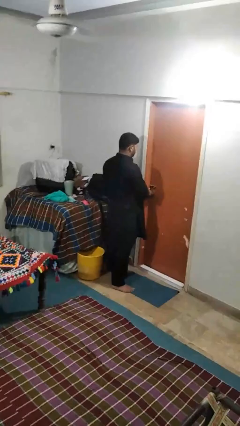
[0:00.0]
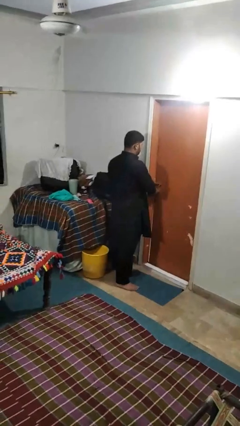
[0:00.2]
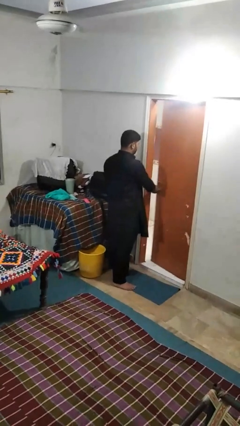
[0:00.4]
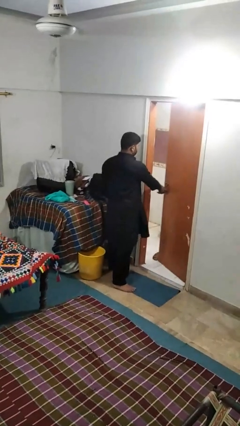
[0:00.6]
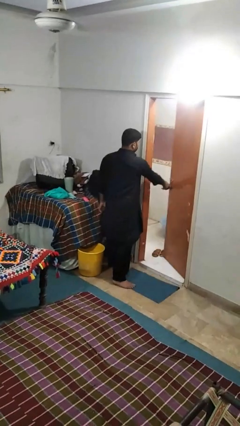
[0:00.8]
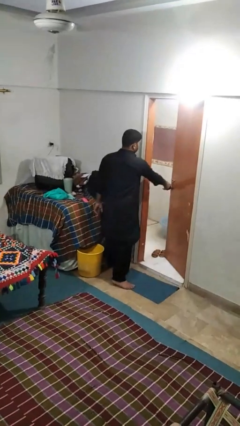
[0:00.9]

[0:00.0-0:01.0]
person opens facility door

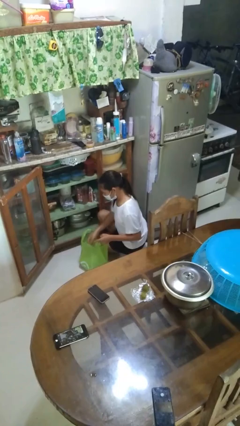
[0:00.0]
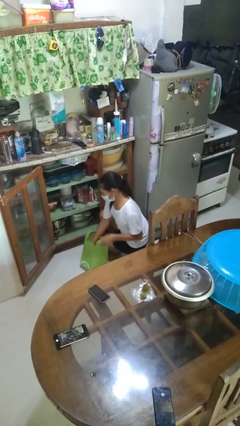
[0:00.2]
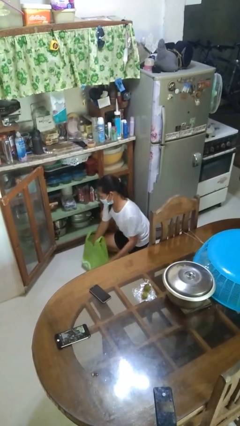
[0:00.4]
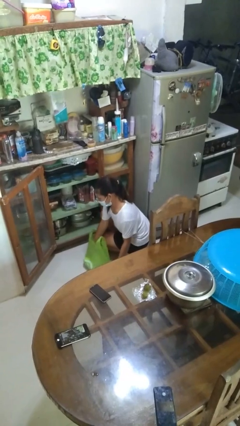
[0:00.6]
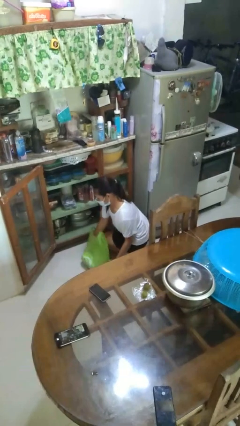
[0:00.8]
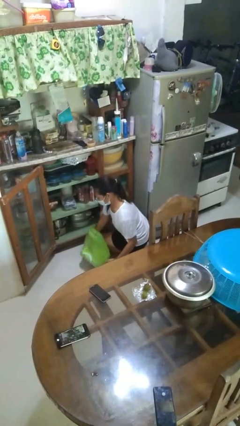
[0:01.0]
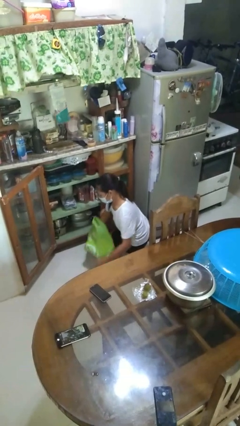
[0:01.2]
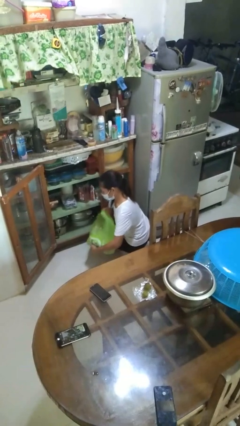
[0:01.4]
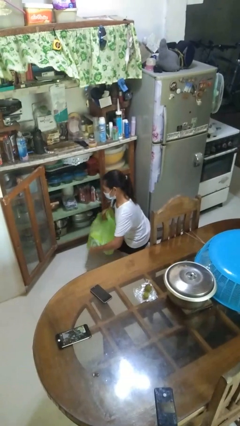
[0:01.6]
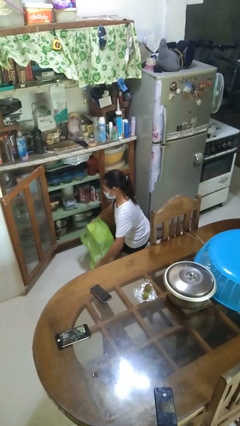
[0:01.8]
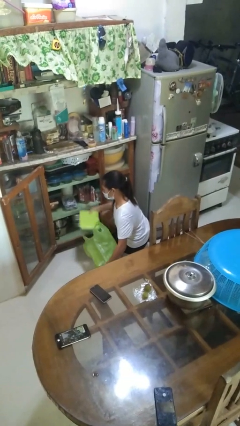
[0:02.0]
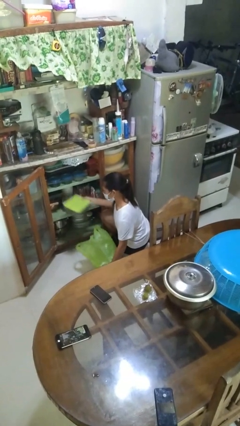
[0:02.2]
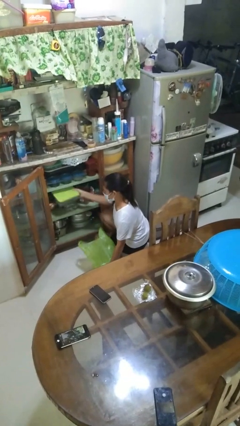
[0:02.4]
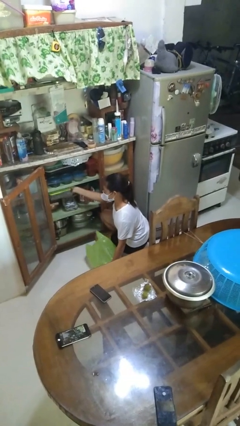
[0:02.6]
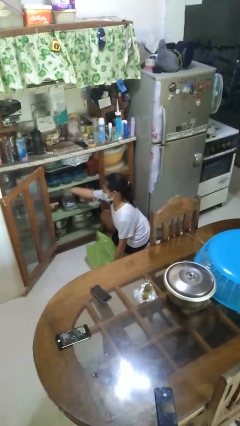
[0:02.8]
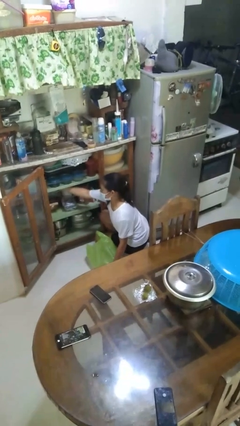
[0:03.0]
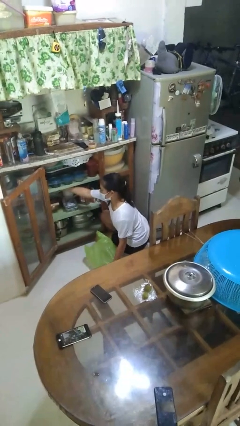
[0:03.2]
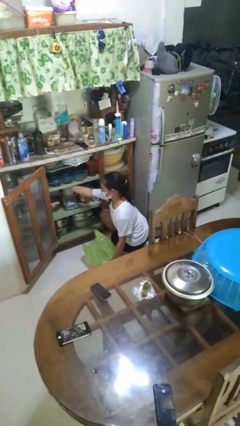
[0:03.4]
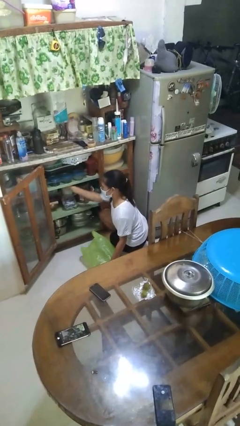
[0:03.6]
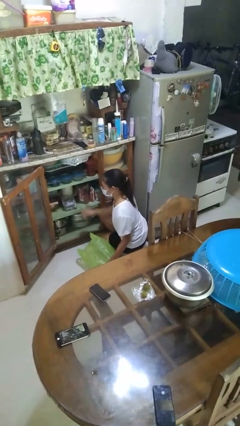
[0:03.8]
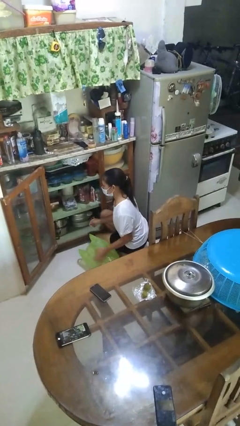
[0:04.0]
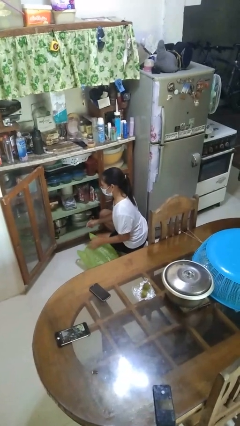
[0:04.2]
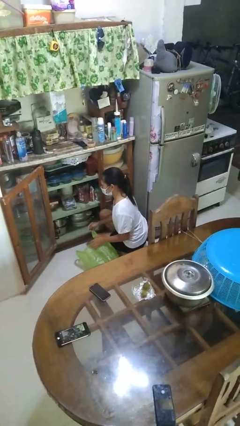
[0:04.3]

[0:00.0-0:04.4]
person loads groceries into cabinet

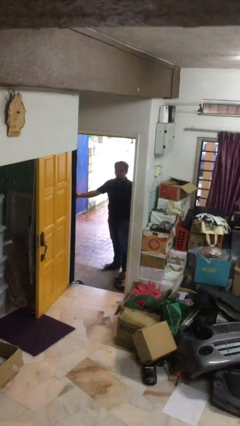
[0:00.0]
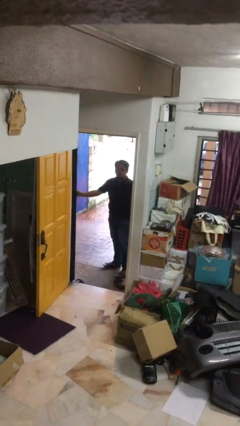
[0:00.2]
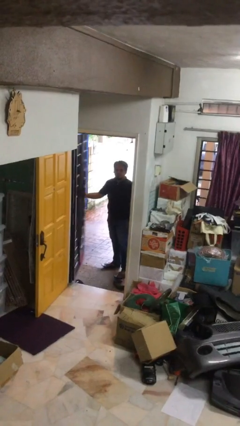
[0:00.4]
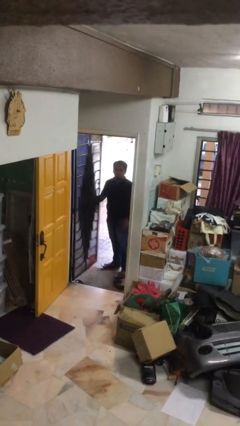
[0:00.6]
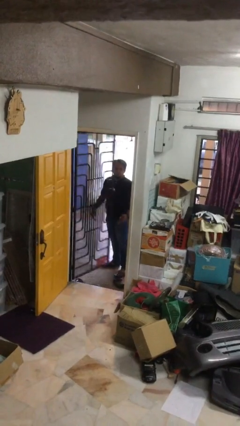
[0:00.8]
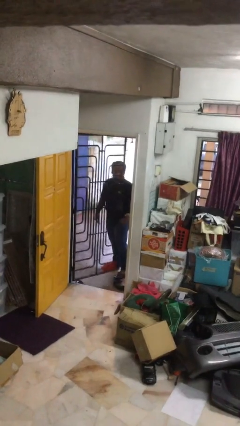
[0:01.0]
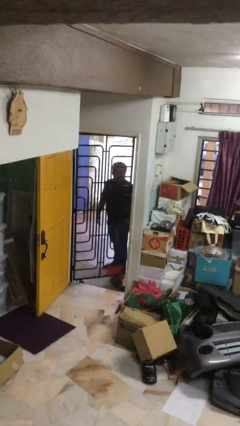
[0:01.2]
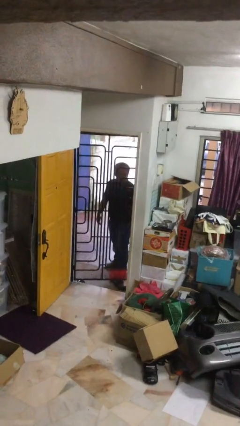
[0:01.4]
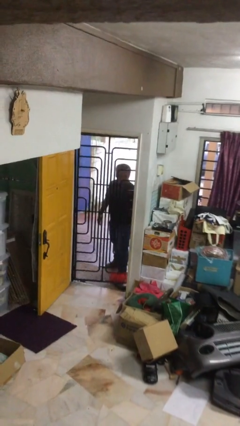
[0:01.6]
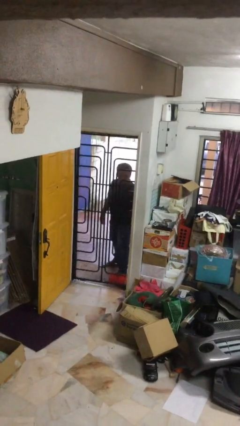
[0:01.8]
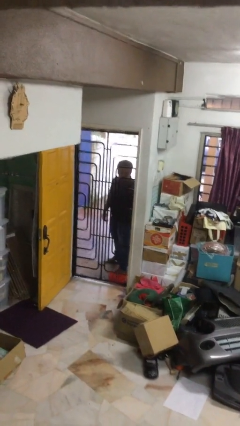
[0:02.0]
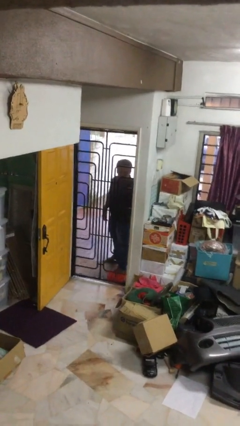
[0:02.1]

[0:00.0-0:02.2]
person closes facility door

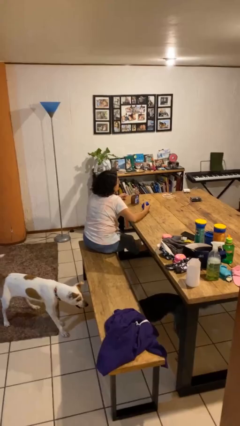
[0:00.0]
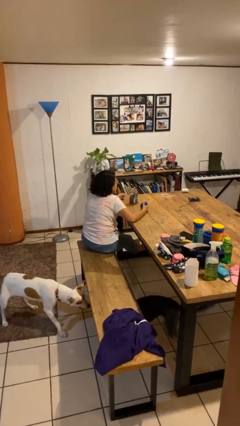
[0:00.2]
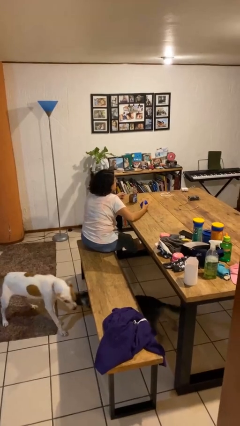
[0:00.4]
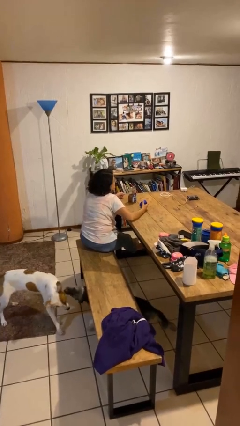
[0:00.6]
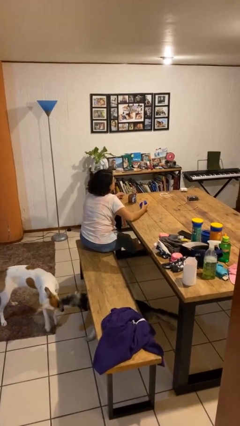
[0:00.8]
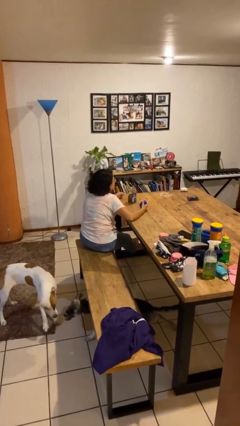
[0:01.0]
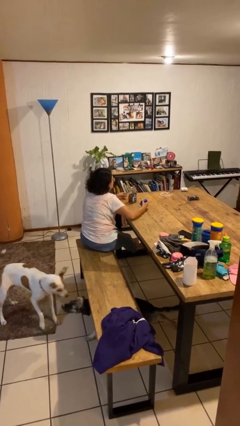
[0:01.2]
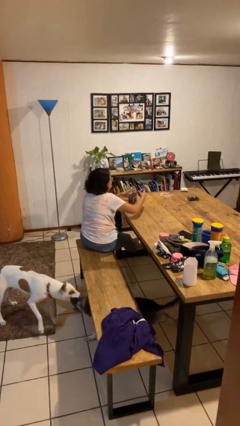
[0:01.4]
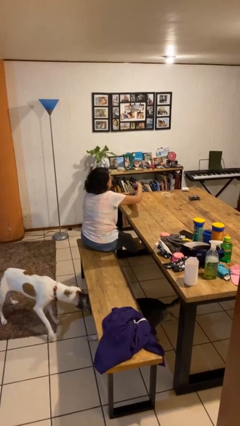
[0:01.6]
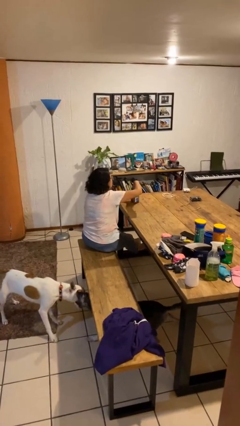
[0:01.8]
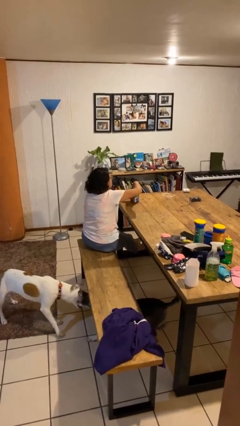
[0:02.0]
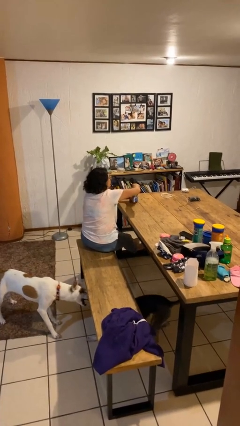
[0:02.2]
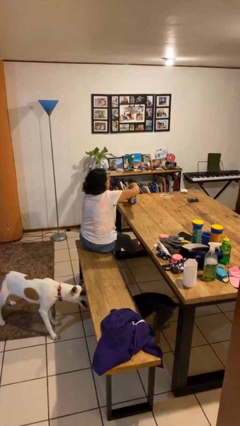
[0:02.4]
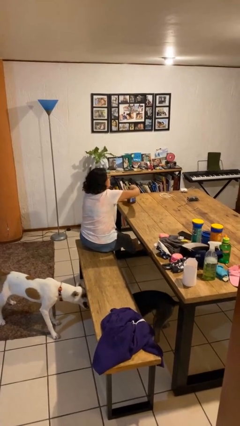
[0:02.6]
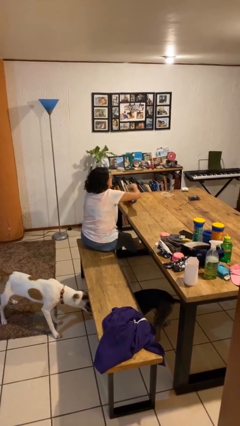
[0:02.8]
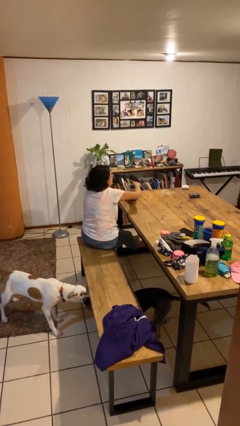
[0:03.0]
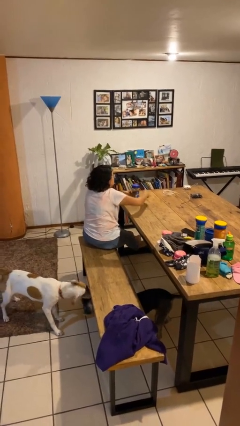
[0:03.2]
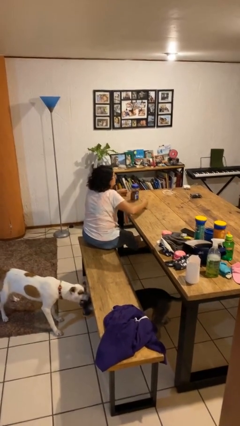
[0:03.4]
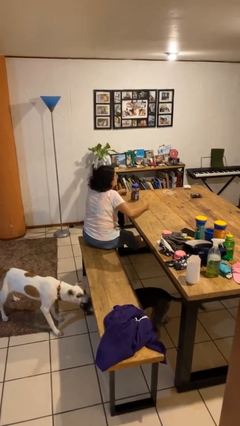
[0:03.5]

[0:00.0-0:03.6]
person closes jar

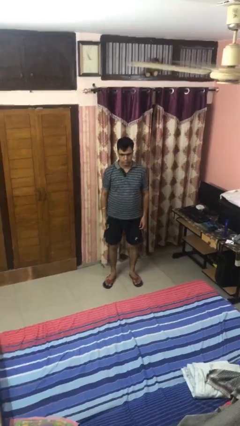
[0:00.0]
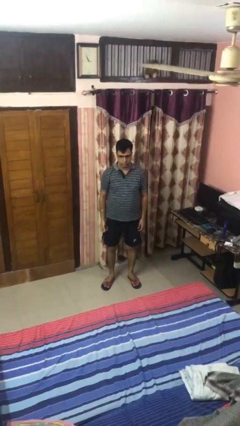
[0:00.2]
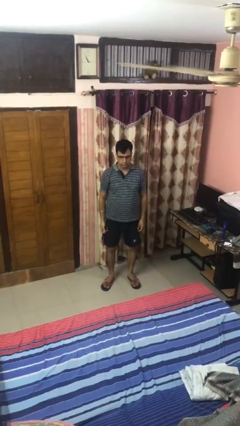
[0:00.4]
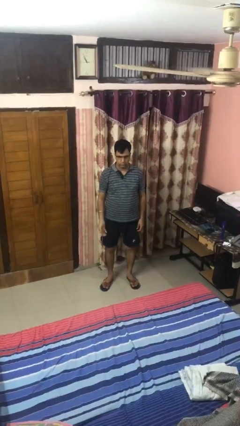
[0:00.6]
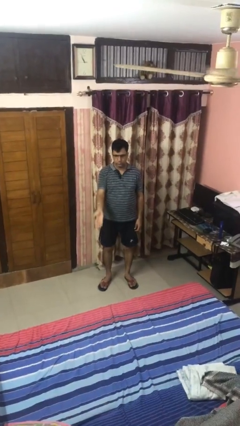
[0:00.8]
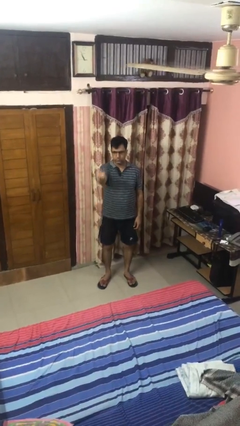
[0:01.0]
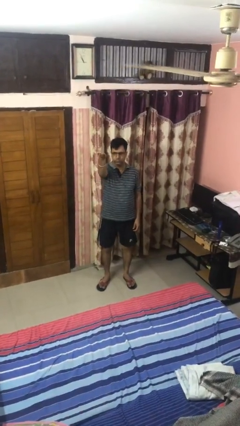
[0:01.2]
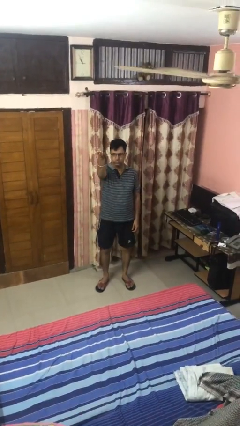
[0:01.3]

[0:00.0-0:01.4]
person gestures swipe up

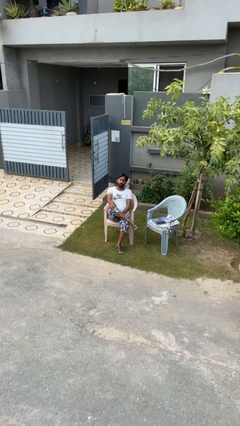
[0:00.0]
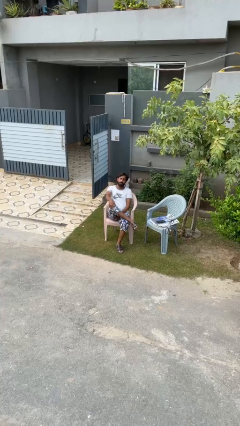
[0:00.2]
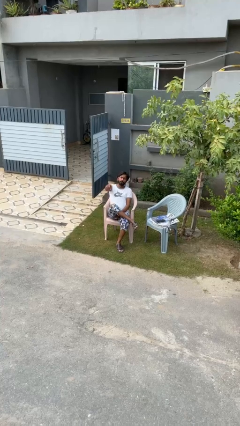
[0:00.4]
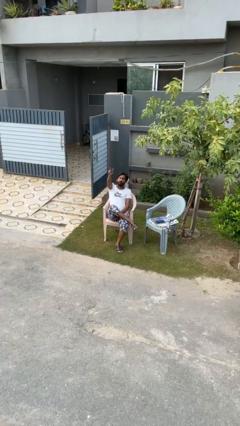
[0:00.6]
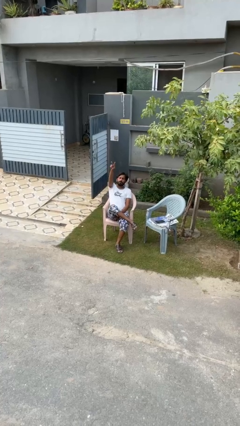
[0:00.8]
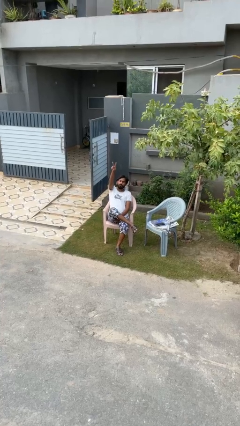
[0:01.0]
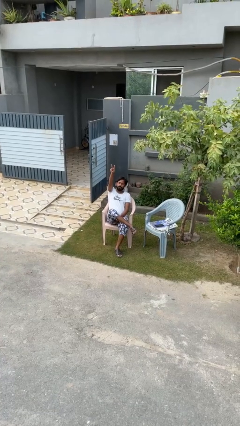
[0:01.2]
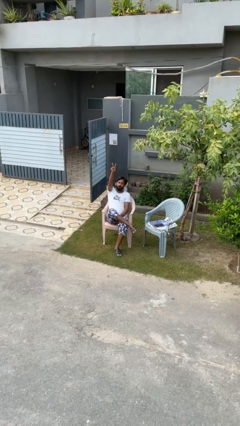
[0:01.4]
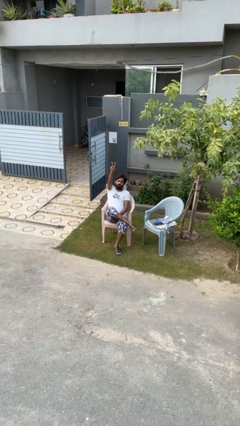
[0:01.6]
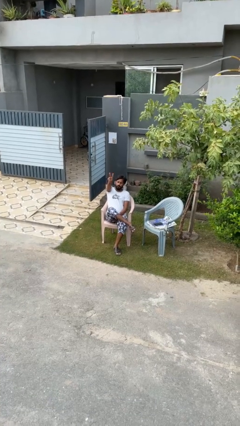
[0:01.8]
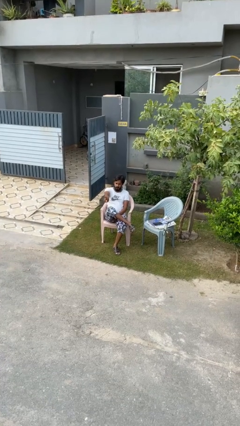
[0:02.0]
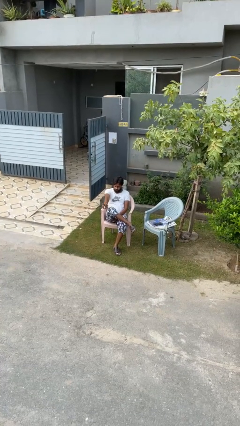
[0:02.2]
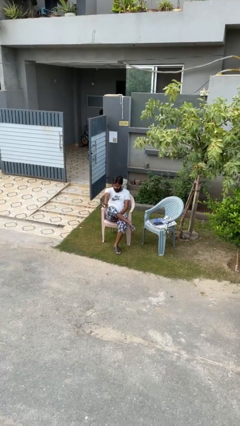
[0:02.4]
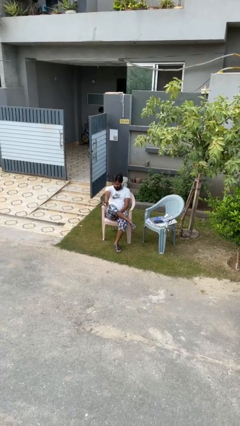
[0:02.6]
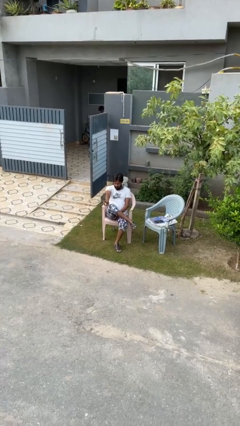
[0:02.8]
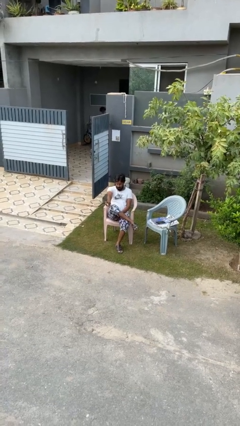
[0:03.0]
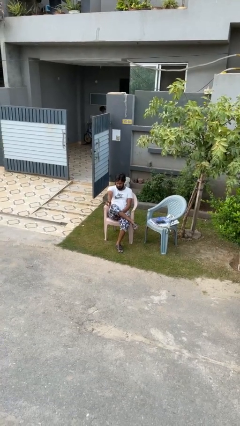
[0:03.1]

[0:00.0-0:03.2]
person gestures peace

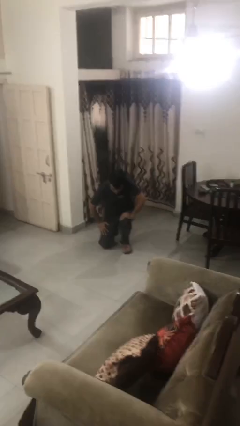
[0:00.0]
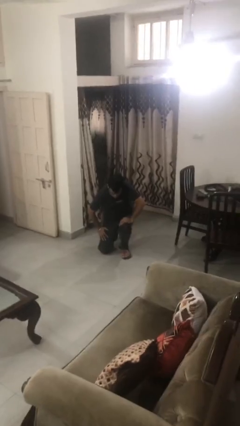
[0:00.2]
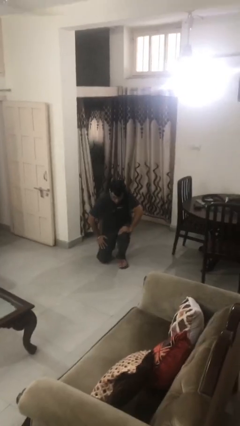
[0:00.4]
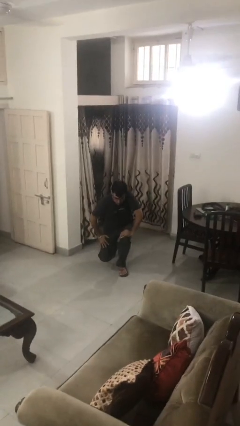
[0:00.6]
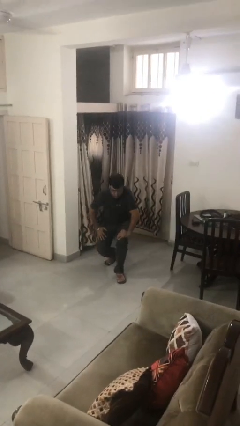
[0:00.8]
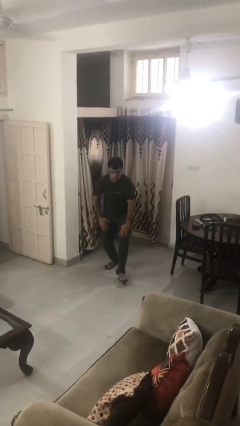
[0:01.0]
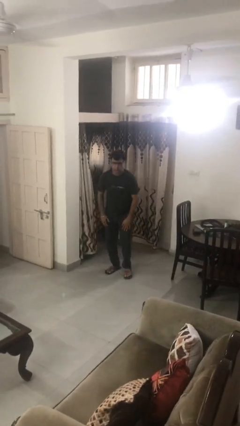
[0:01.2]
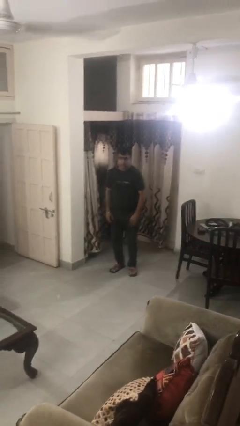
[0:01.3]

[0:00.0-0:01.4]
person stands up from floor
